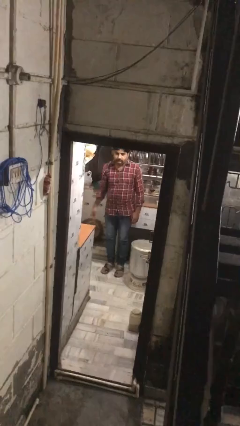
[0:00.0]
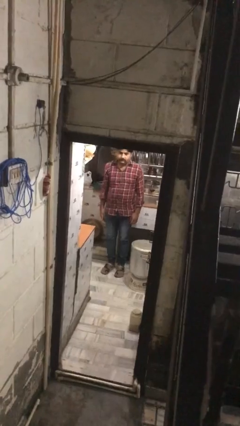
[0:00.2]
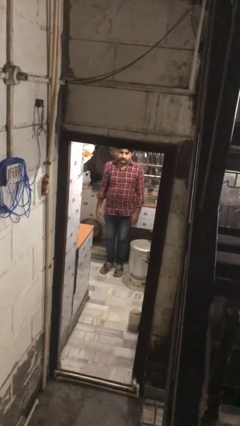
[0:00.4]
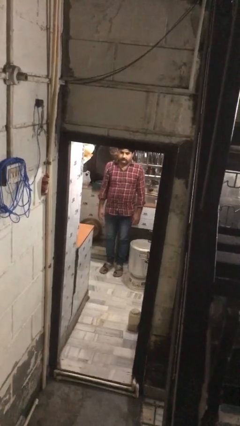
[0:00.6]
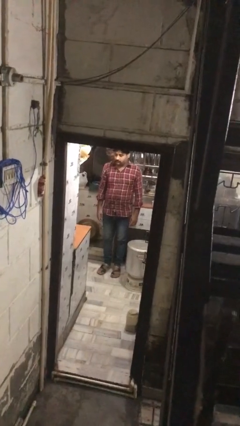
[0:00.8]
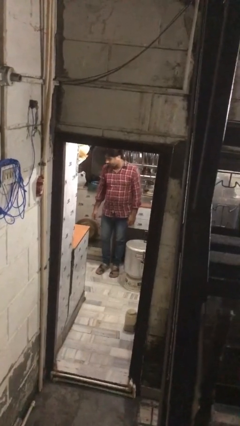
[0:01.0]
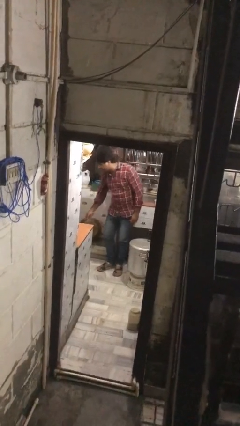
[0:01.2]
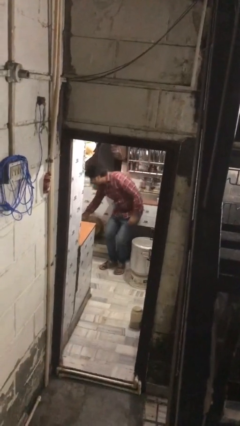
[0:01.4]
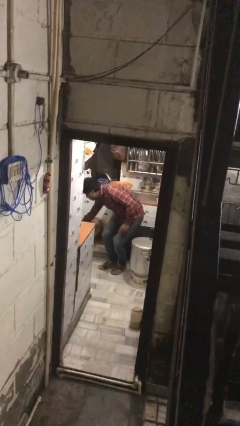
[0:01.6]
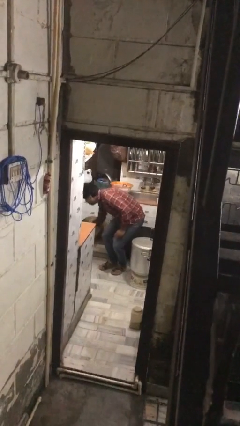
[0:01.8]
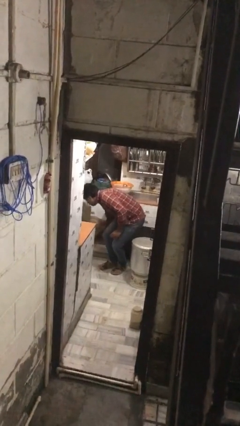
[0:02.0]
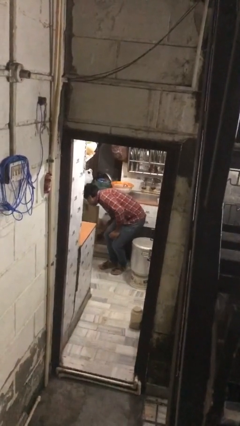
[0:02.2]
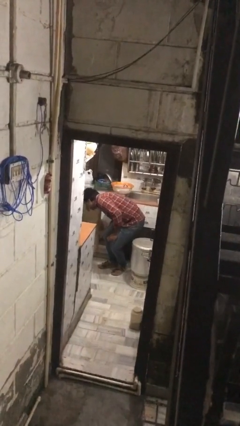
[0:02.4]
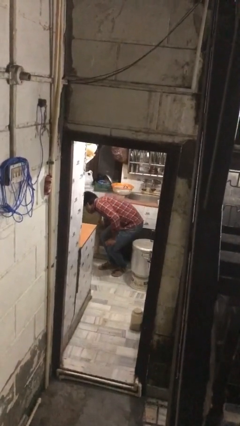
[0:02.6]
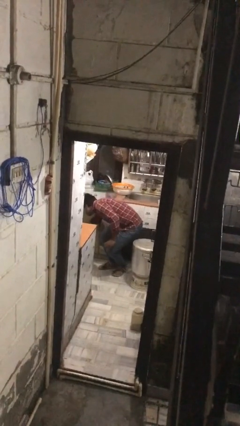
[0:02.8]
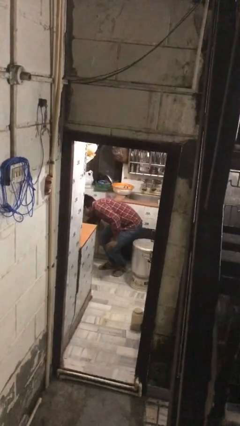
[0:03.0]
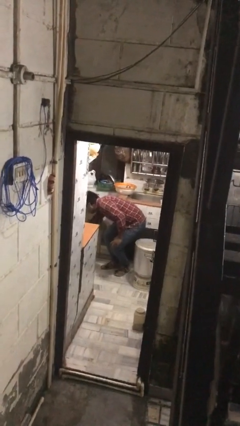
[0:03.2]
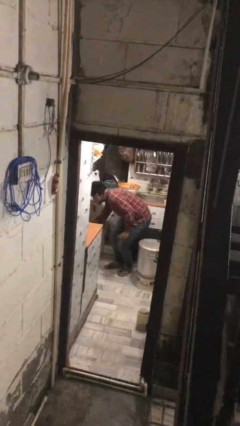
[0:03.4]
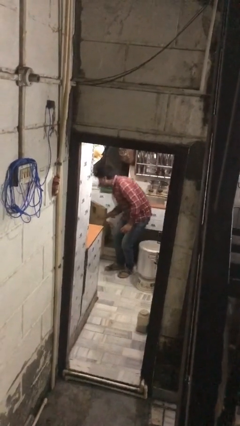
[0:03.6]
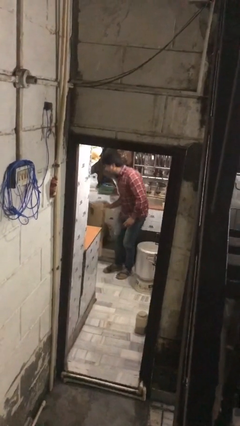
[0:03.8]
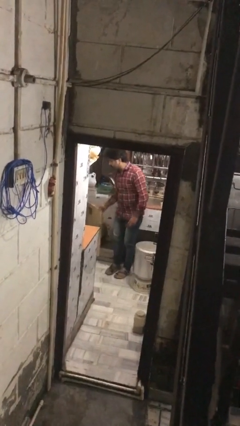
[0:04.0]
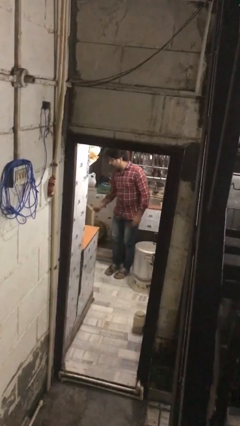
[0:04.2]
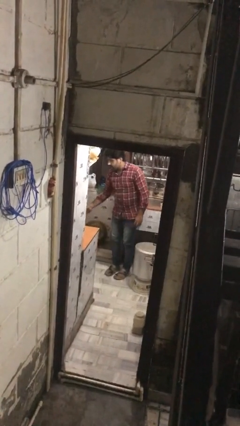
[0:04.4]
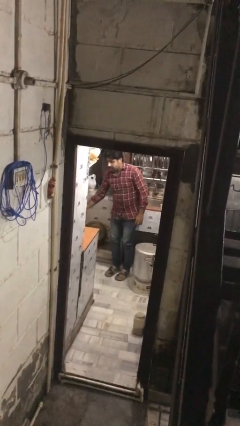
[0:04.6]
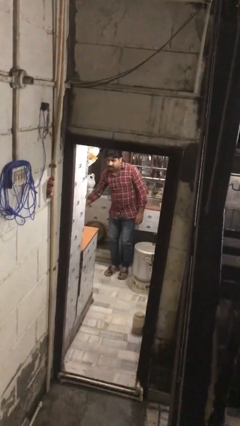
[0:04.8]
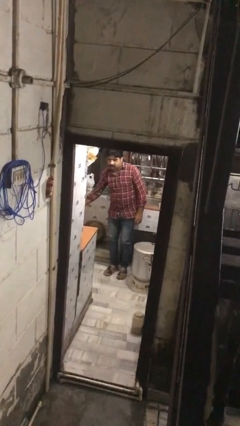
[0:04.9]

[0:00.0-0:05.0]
person searches in kitchen drawer

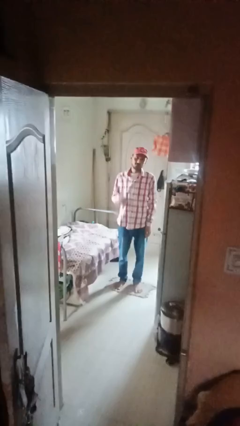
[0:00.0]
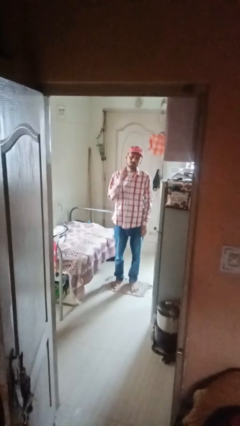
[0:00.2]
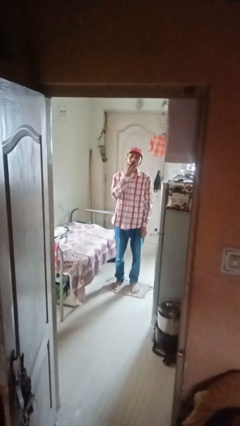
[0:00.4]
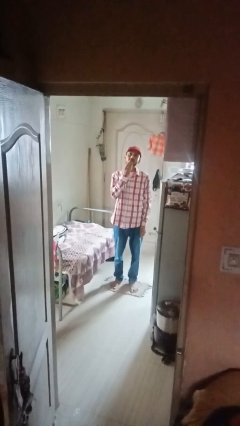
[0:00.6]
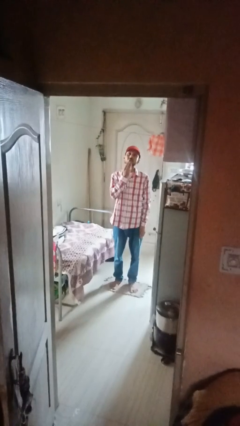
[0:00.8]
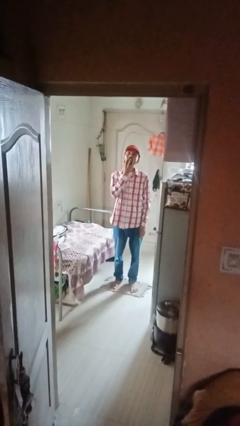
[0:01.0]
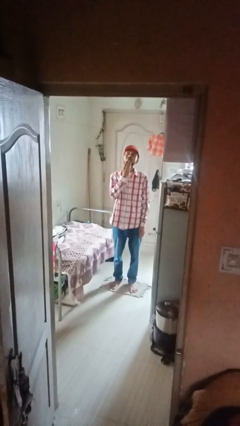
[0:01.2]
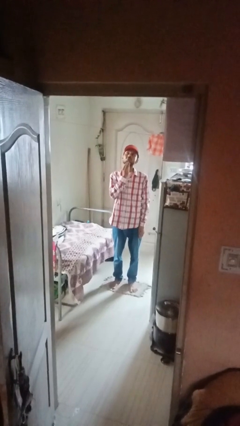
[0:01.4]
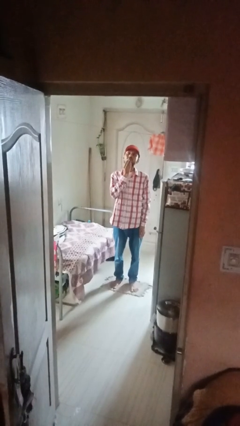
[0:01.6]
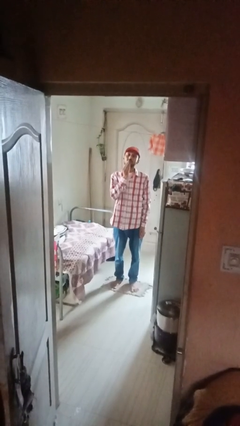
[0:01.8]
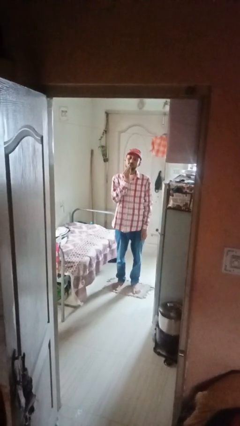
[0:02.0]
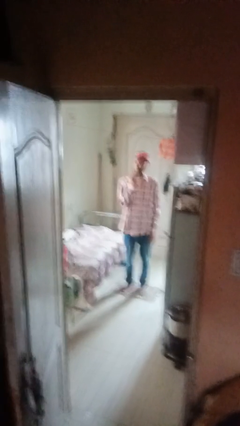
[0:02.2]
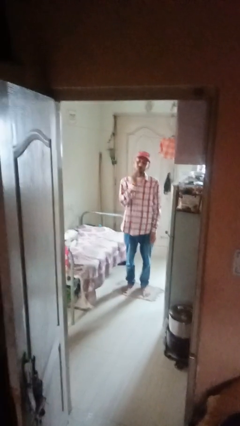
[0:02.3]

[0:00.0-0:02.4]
person strokes chin

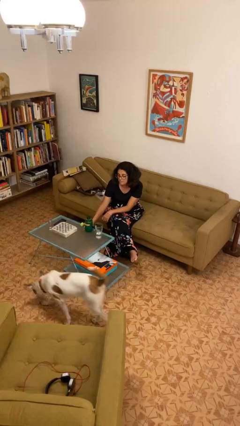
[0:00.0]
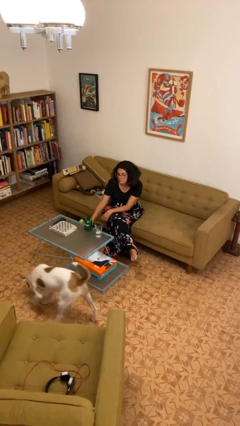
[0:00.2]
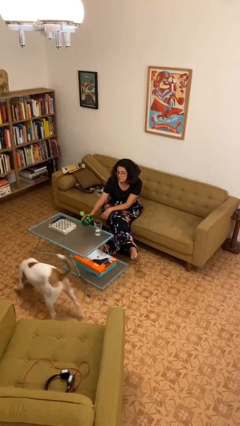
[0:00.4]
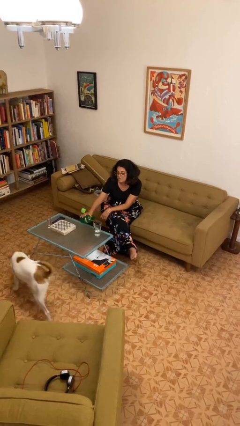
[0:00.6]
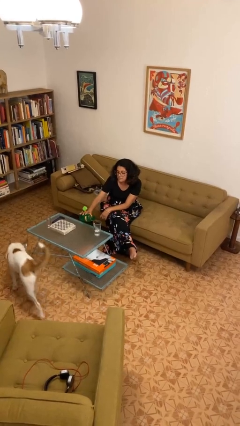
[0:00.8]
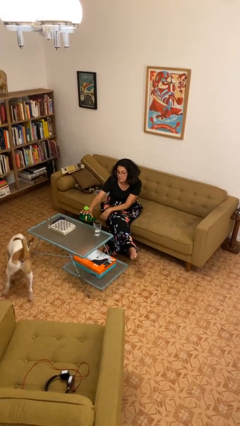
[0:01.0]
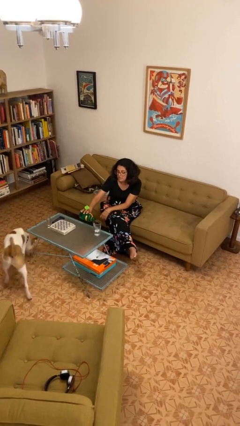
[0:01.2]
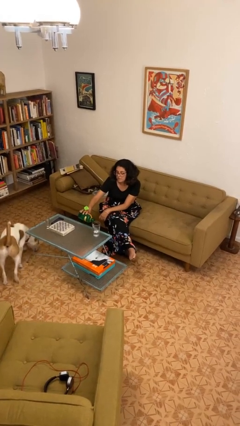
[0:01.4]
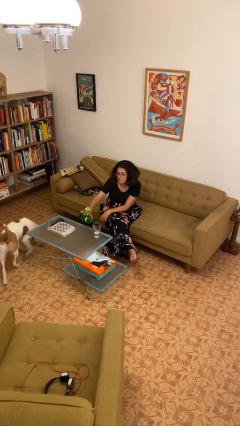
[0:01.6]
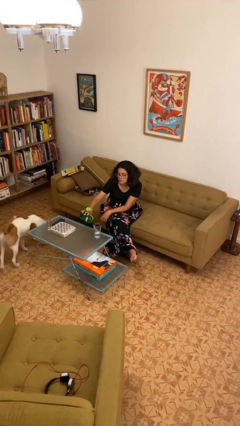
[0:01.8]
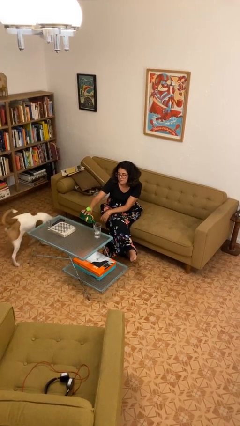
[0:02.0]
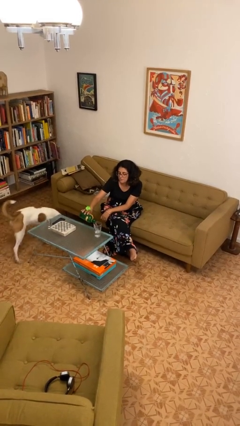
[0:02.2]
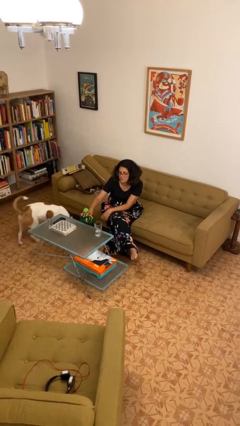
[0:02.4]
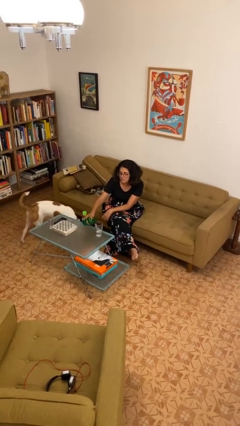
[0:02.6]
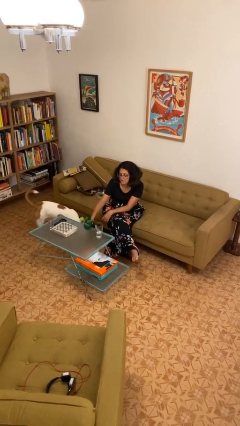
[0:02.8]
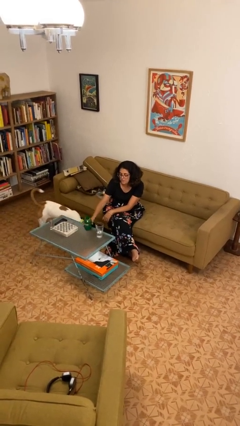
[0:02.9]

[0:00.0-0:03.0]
person pours liquid into cup

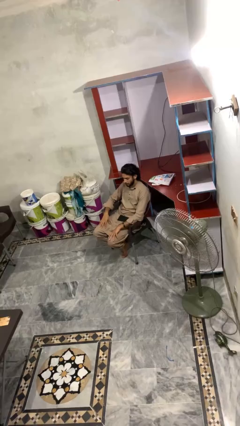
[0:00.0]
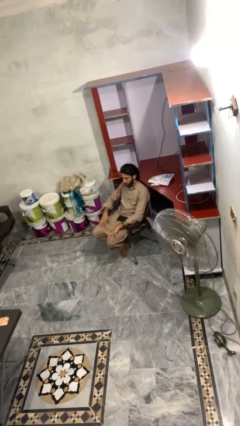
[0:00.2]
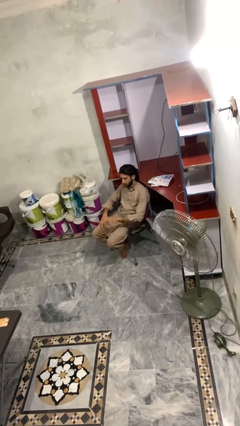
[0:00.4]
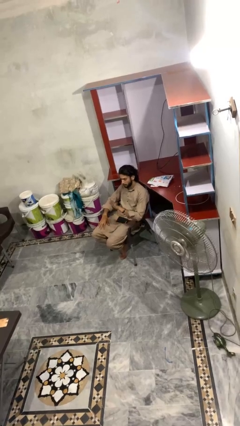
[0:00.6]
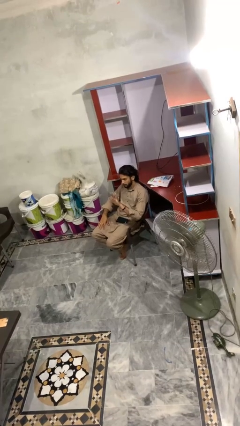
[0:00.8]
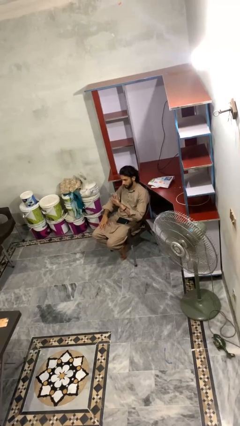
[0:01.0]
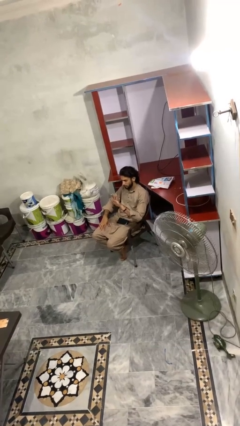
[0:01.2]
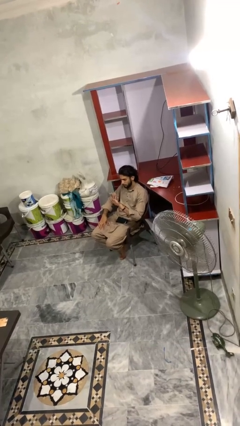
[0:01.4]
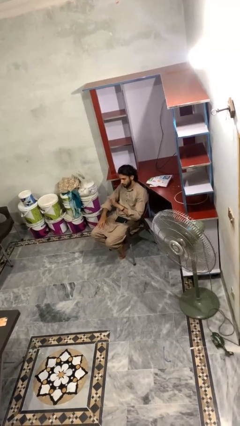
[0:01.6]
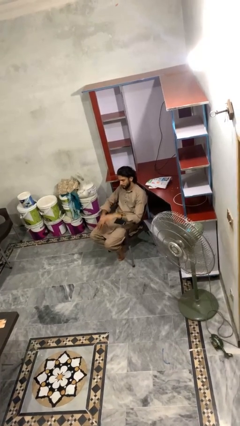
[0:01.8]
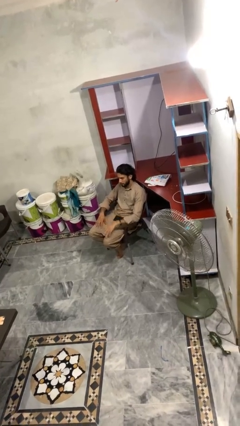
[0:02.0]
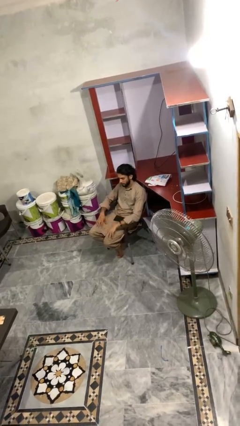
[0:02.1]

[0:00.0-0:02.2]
person gestures number five

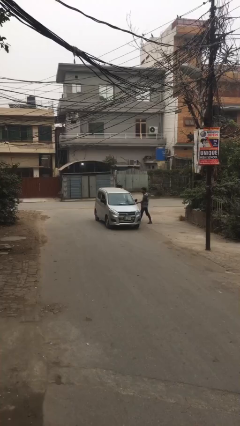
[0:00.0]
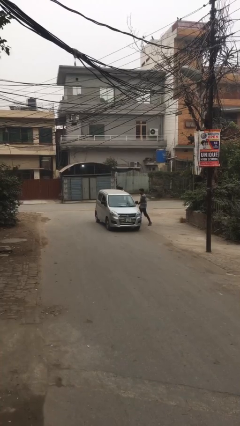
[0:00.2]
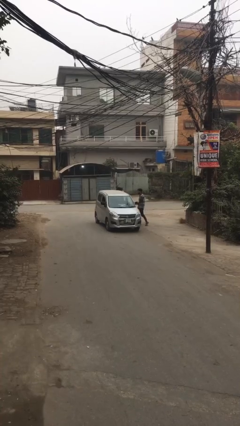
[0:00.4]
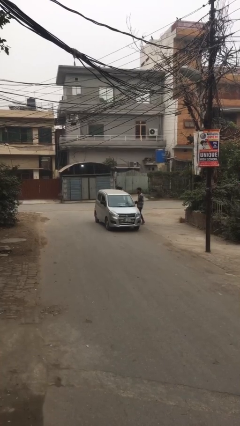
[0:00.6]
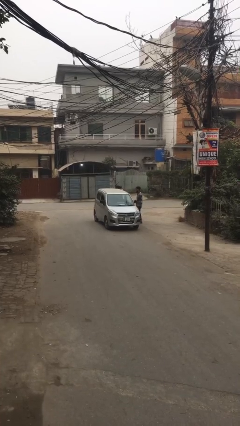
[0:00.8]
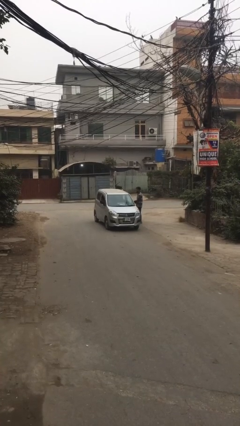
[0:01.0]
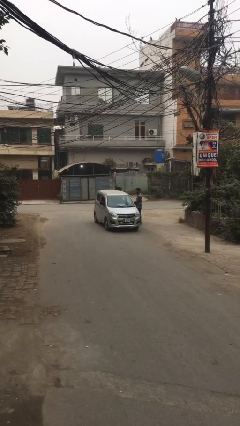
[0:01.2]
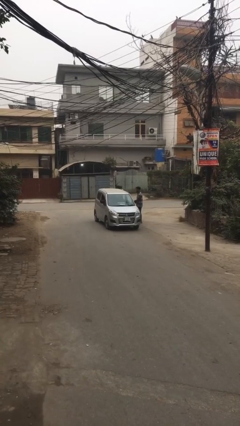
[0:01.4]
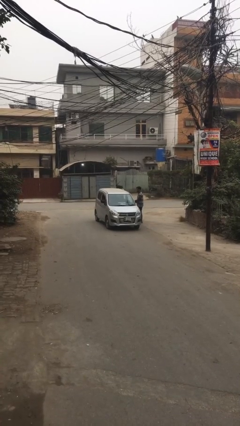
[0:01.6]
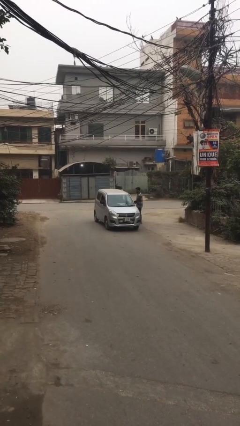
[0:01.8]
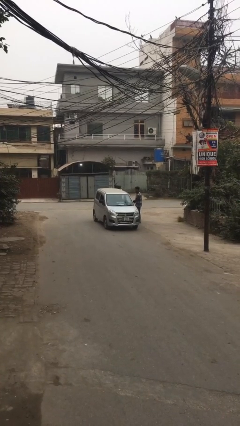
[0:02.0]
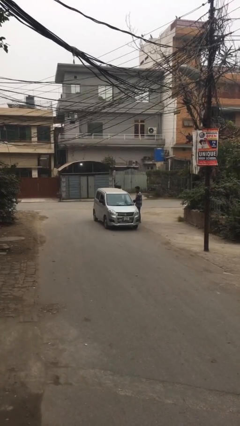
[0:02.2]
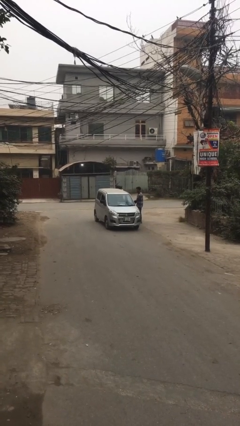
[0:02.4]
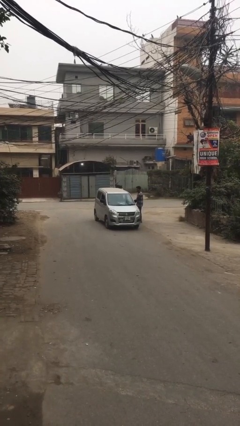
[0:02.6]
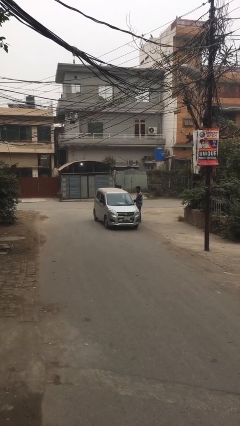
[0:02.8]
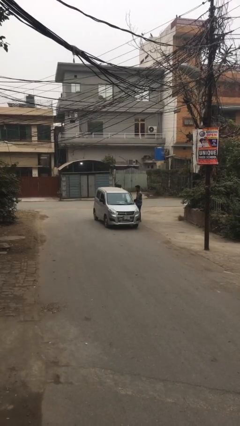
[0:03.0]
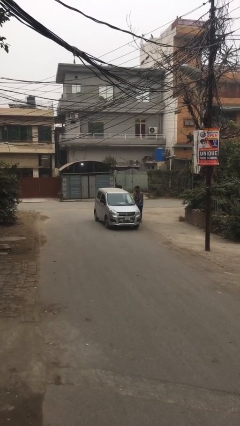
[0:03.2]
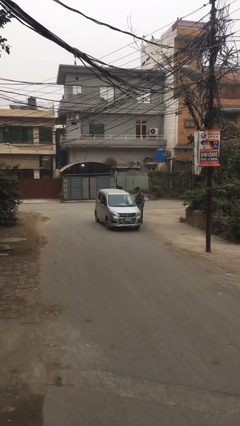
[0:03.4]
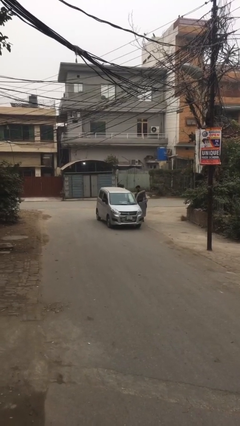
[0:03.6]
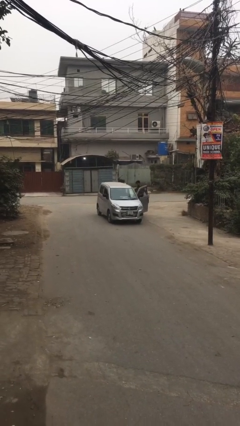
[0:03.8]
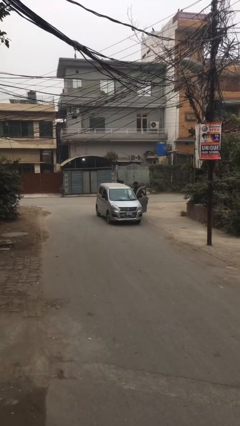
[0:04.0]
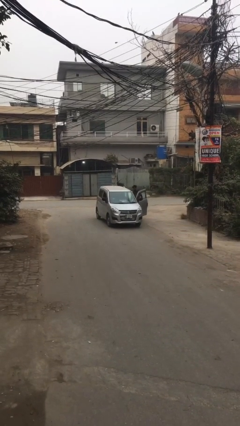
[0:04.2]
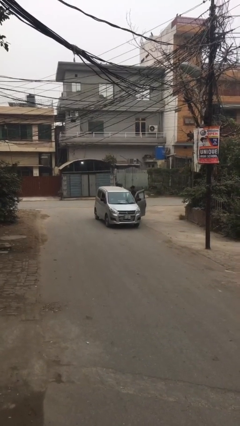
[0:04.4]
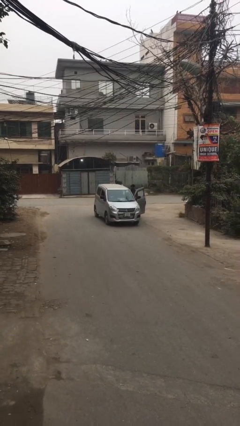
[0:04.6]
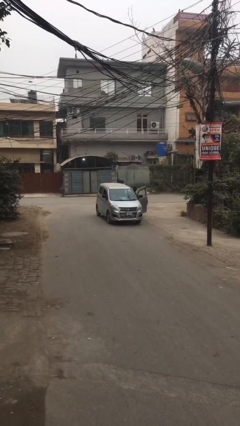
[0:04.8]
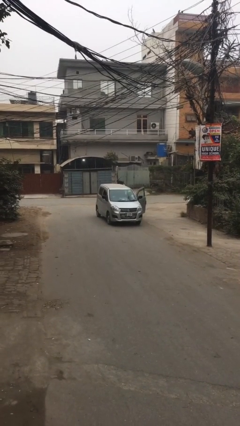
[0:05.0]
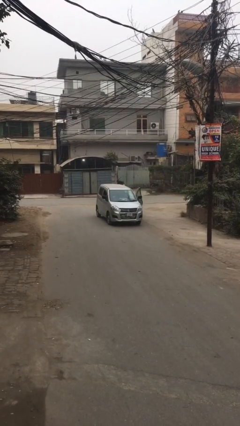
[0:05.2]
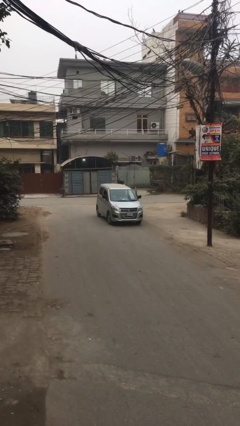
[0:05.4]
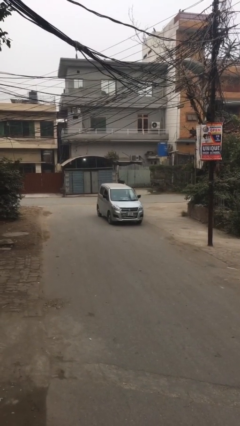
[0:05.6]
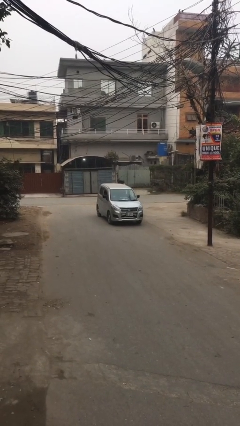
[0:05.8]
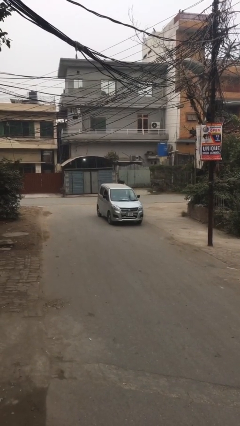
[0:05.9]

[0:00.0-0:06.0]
car picks up person
